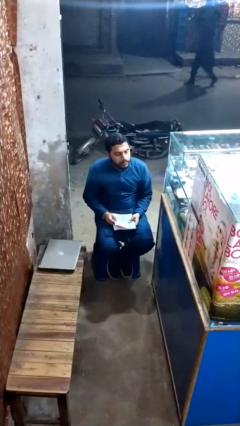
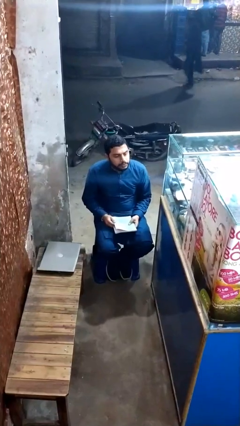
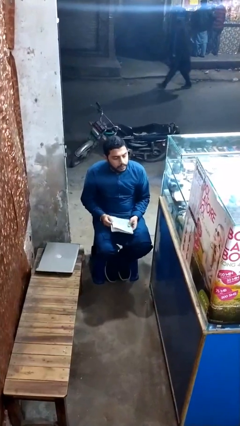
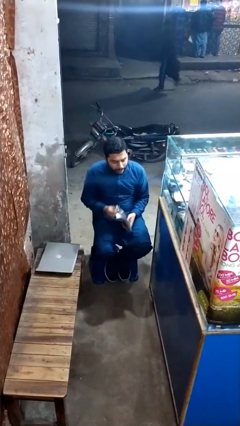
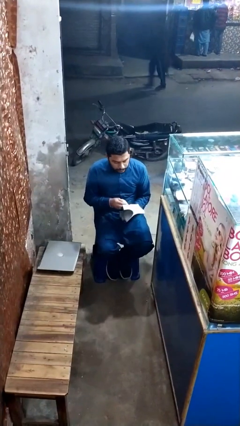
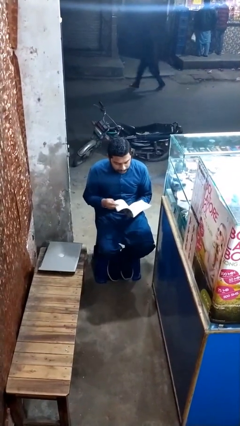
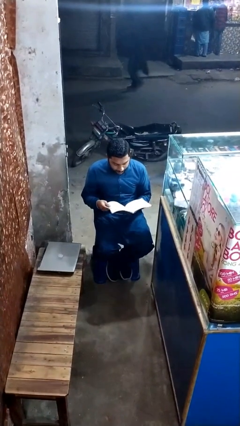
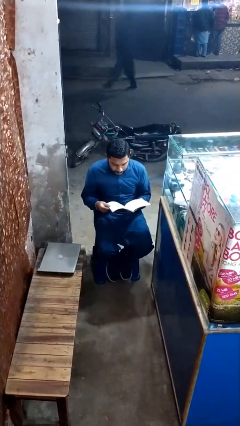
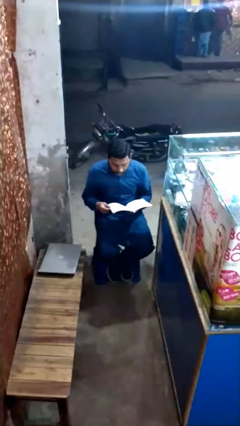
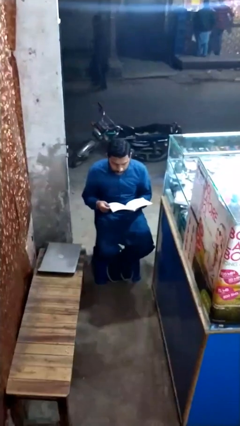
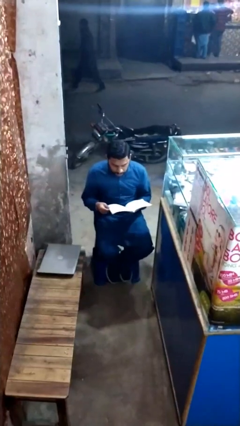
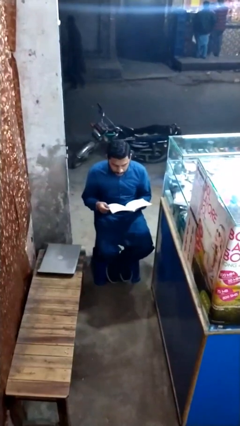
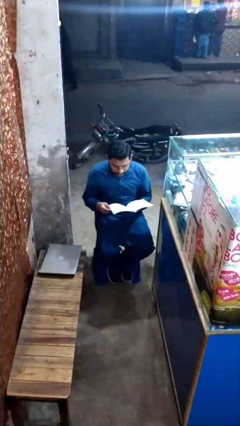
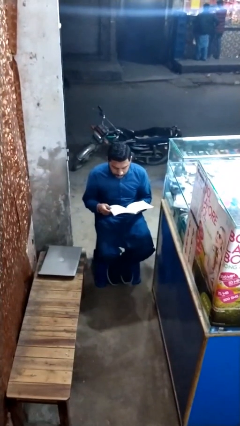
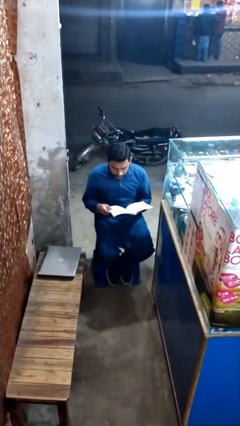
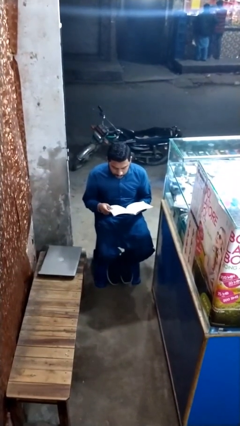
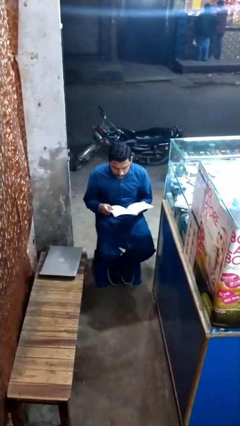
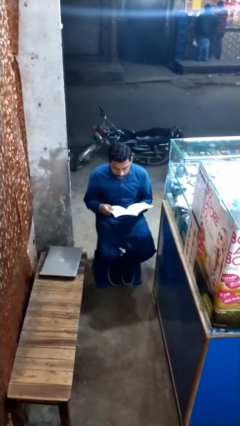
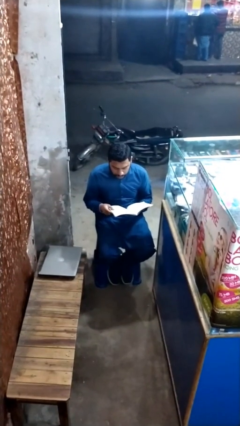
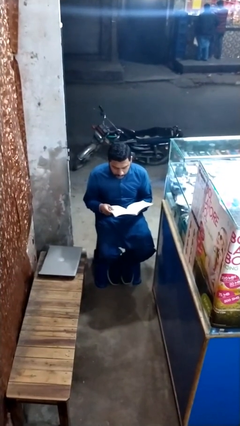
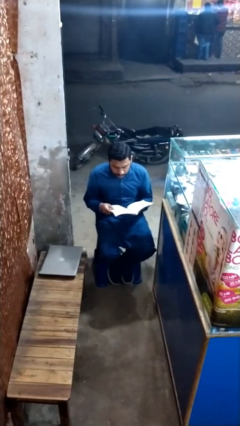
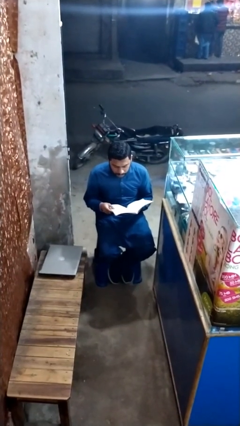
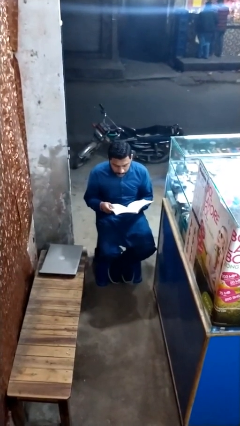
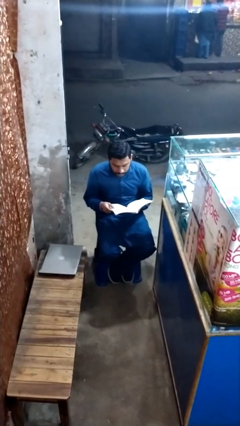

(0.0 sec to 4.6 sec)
person reads document

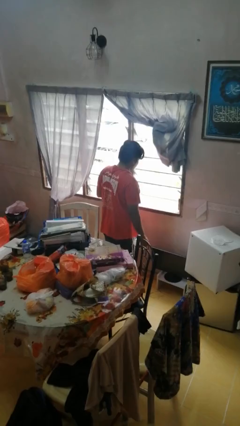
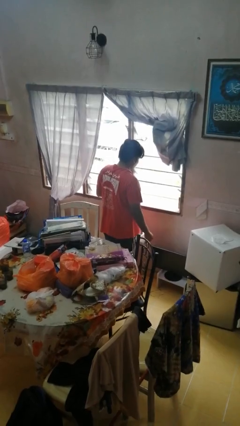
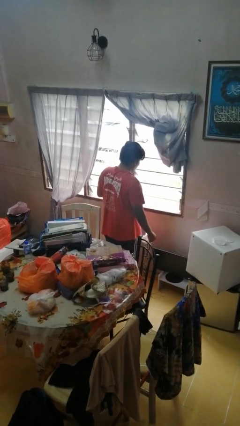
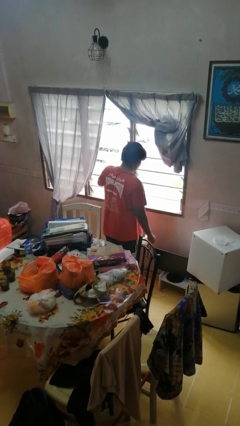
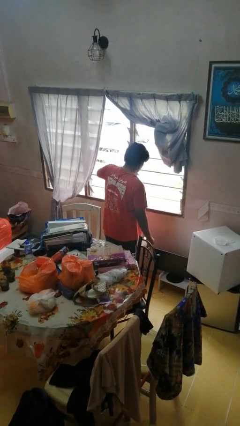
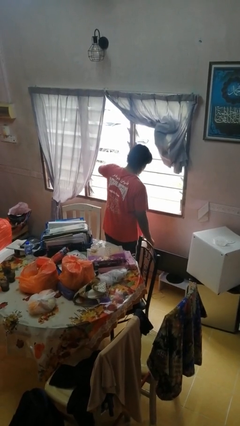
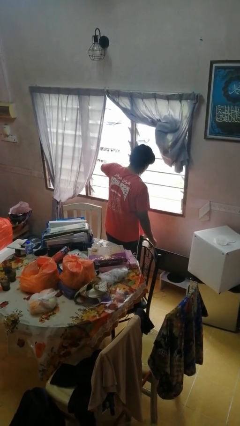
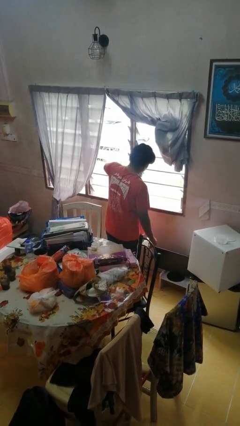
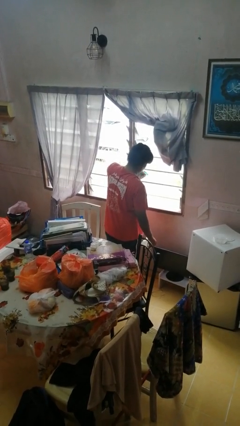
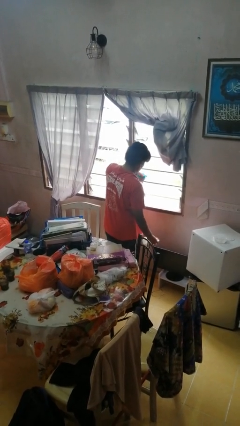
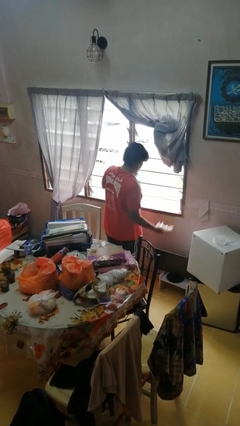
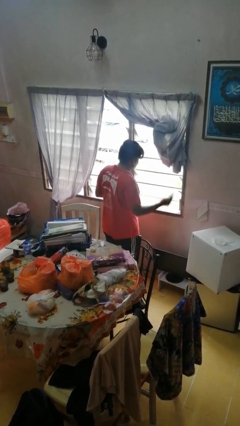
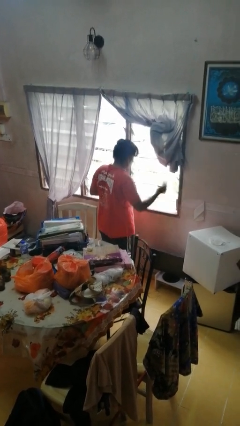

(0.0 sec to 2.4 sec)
person sprays from bottle

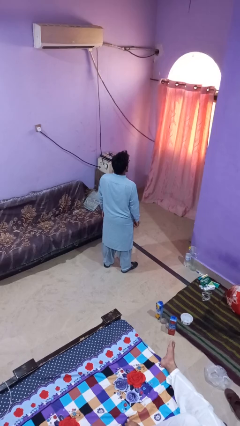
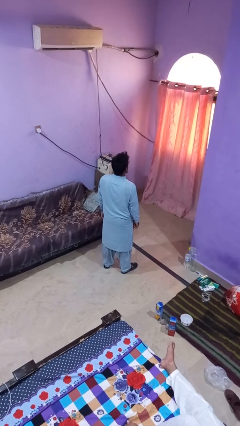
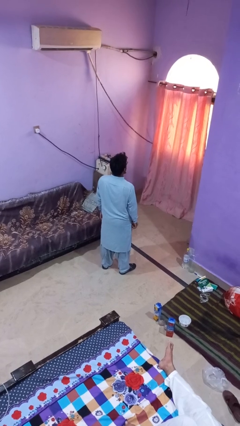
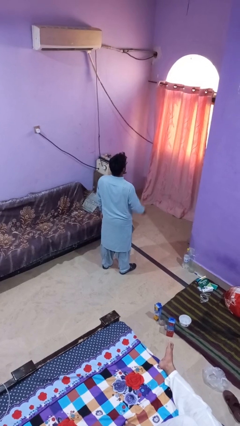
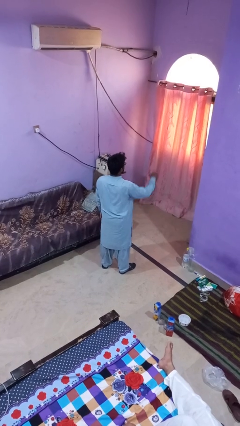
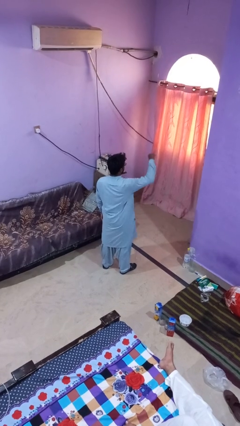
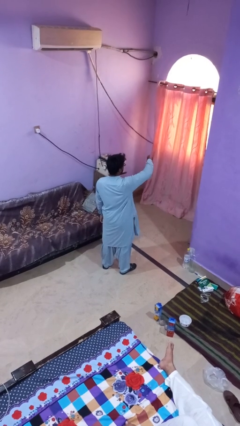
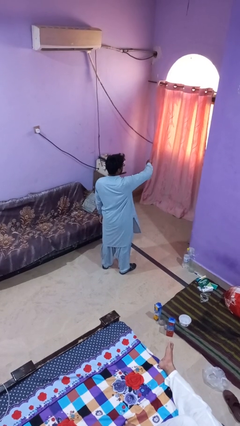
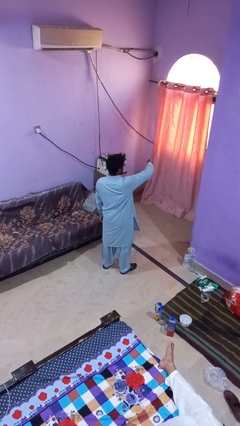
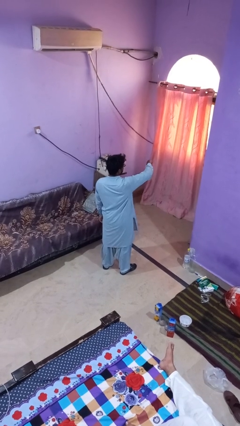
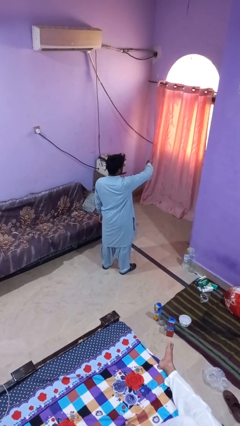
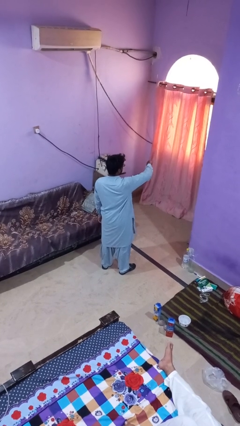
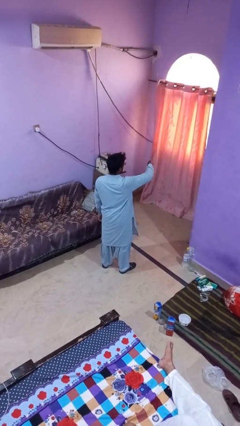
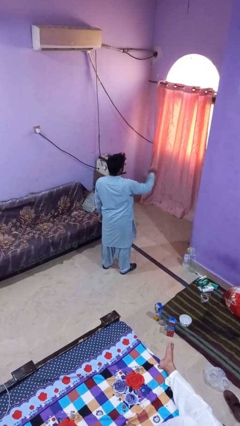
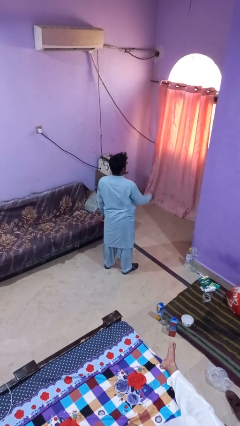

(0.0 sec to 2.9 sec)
person gestures thumbs down

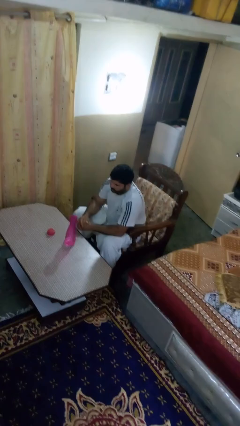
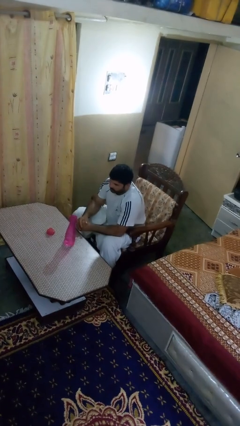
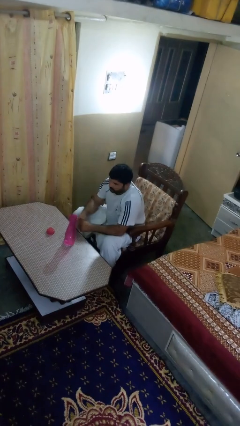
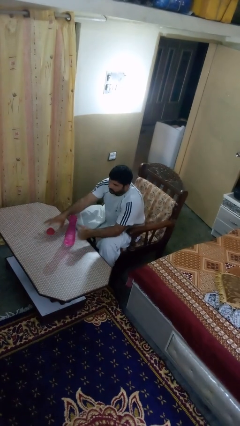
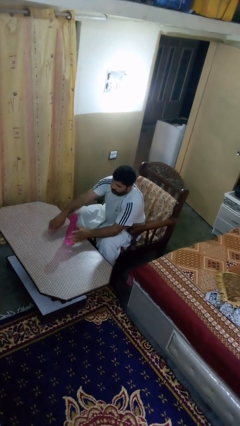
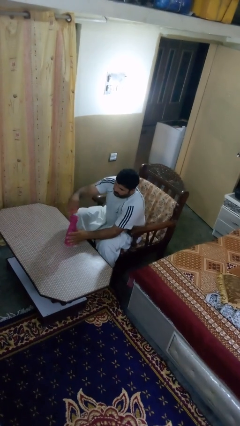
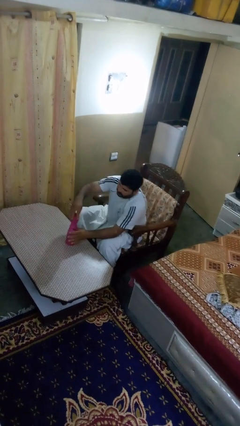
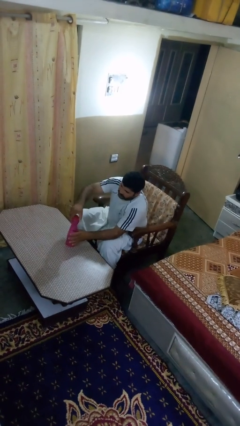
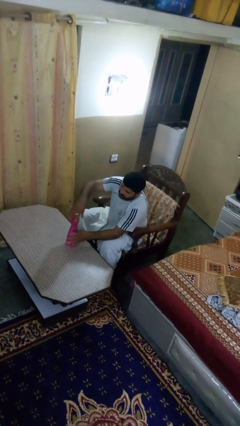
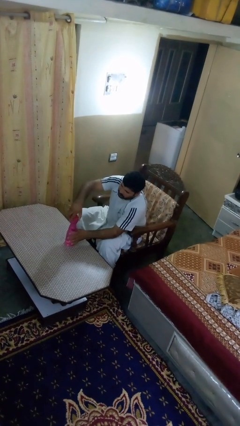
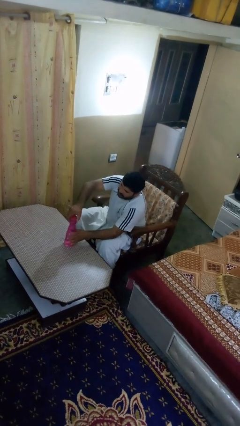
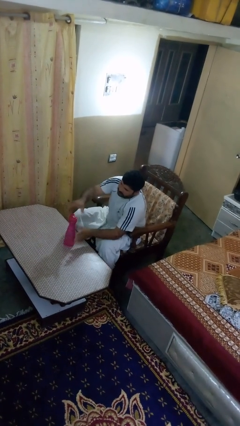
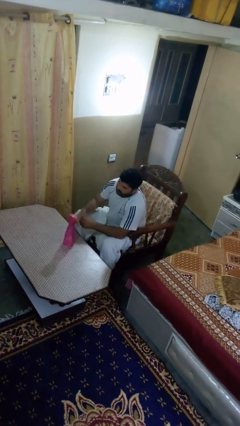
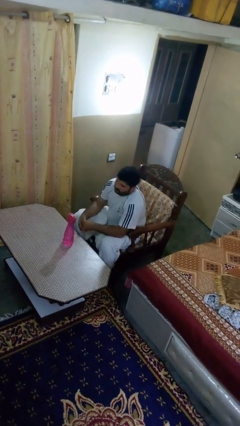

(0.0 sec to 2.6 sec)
person screws lid to bottle

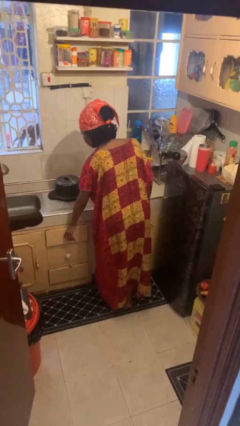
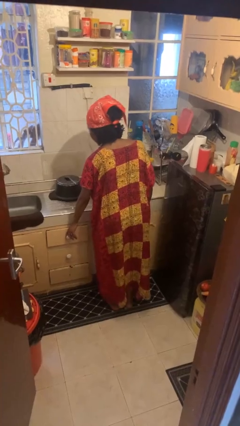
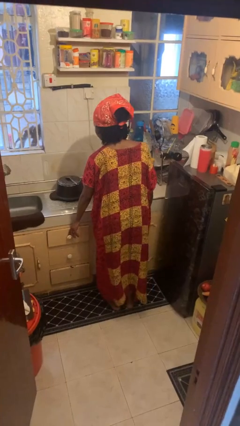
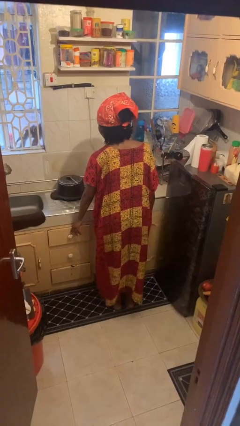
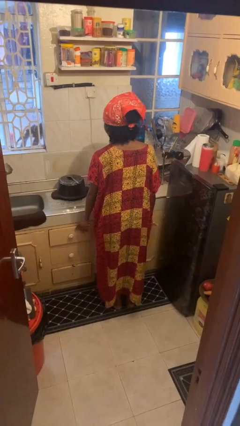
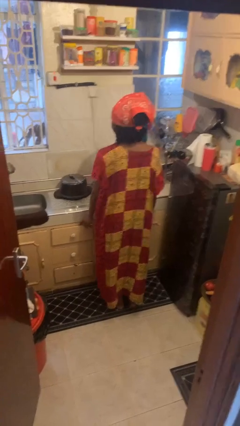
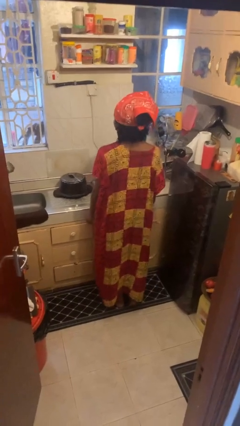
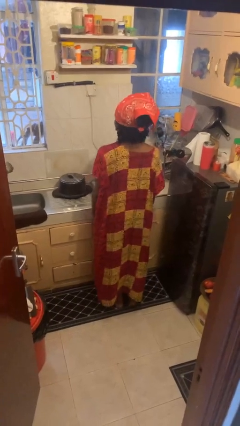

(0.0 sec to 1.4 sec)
person closes kitchen drawer

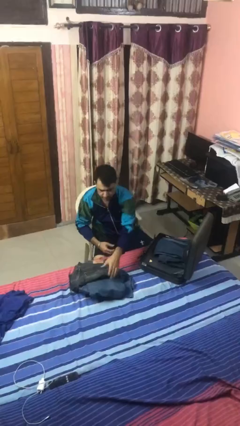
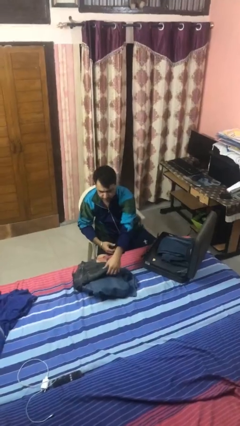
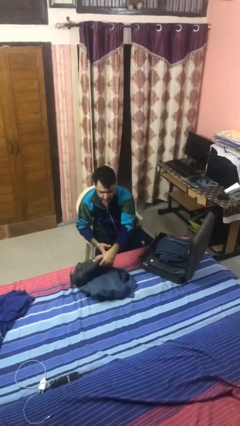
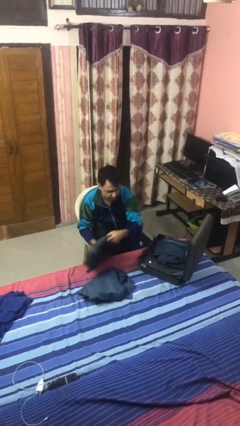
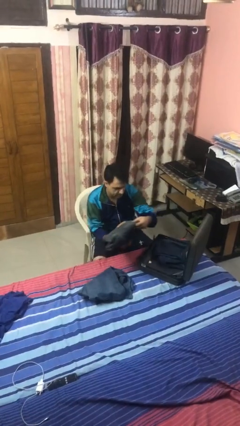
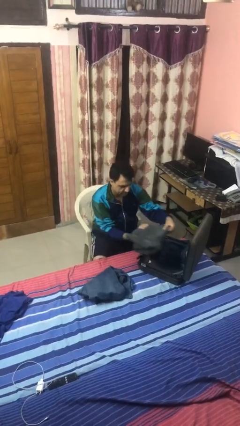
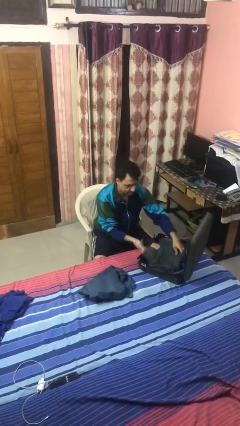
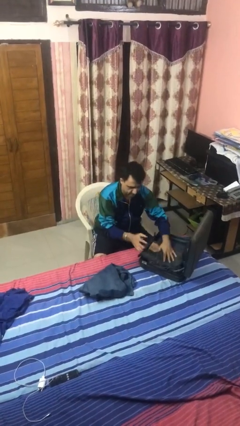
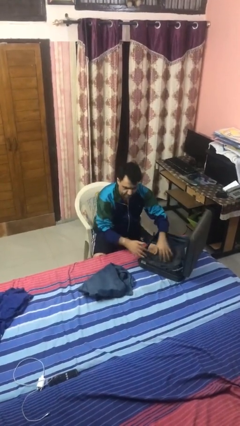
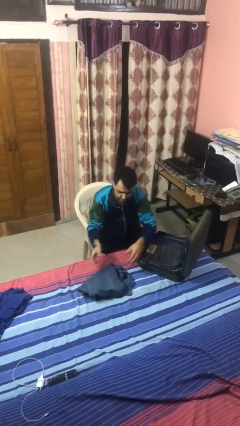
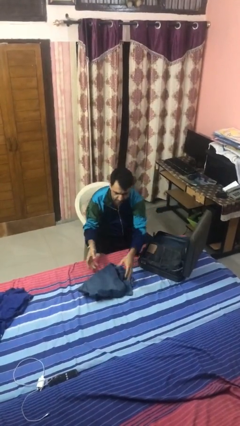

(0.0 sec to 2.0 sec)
person loads clothes into suitcase

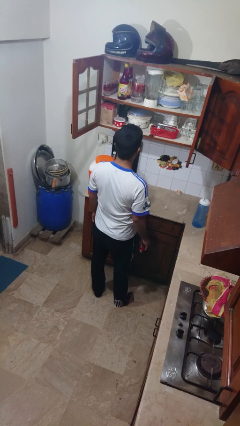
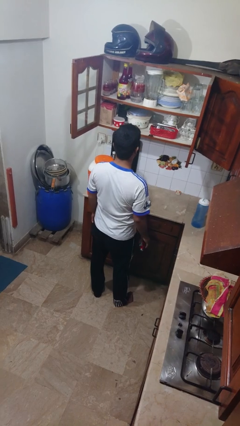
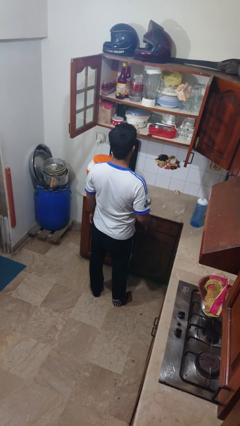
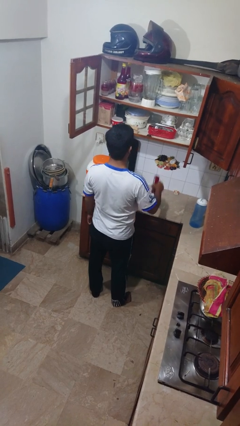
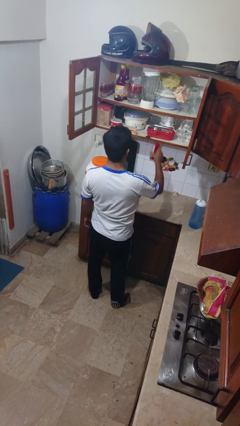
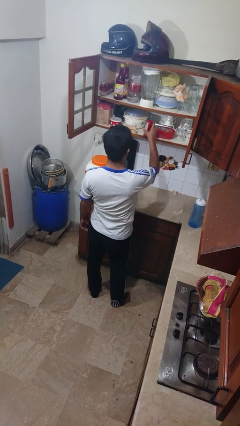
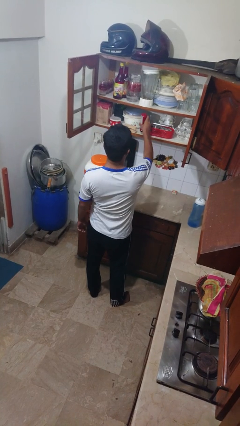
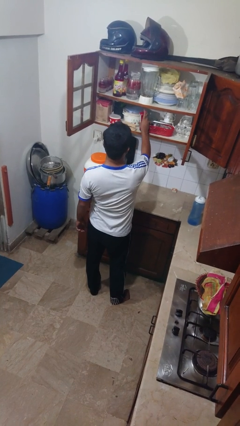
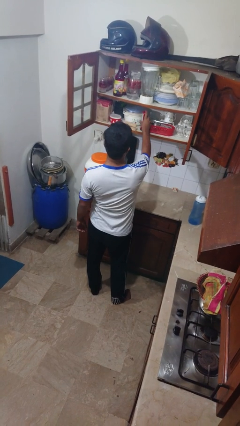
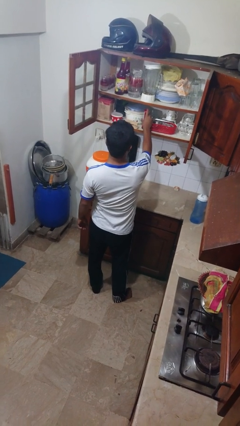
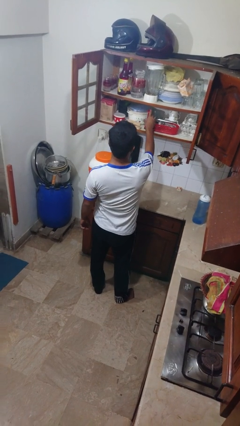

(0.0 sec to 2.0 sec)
person puts down object into cabinet
